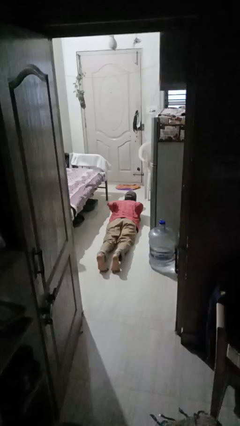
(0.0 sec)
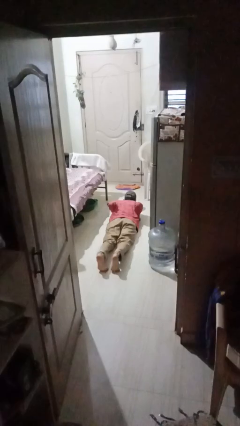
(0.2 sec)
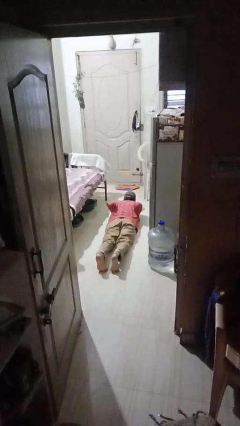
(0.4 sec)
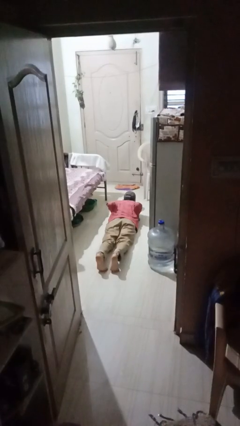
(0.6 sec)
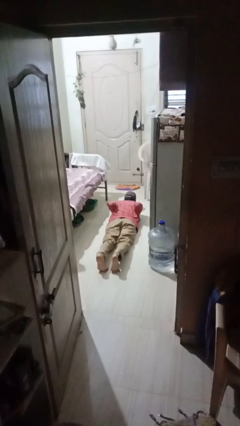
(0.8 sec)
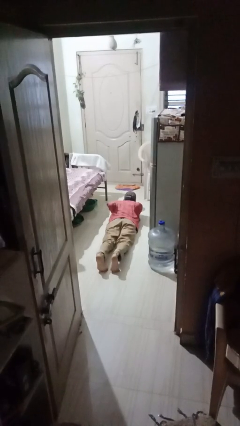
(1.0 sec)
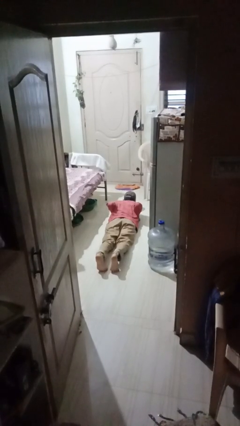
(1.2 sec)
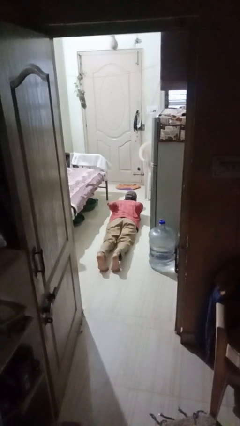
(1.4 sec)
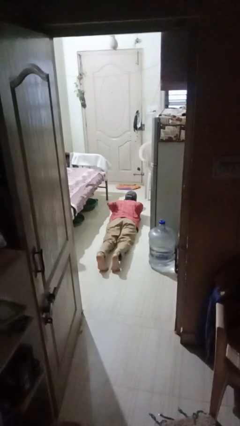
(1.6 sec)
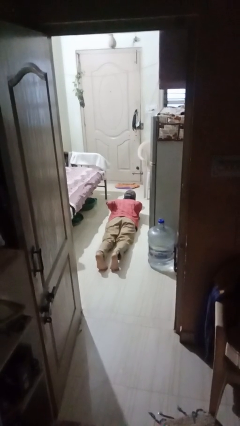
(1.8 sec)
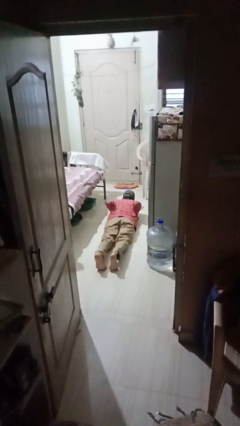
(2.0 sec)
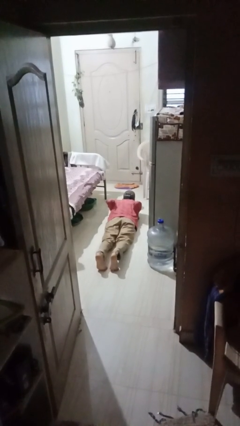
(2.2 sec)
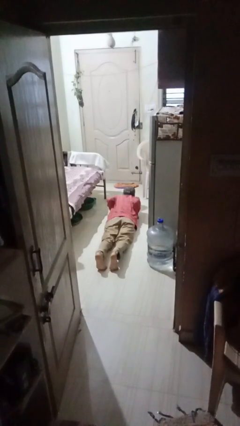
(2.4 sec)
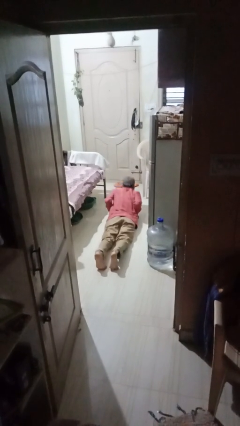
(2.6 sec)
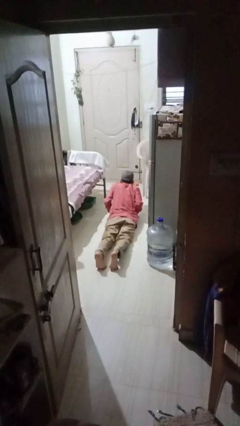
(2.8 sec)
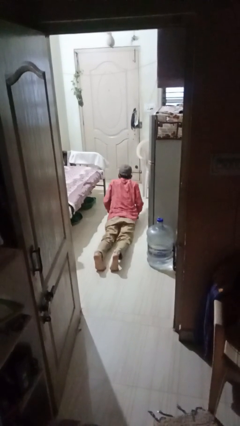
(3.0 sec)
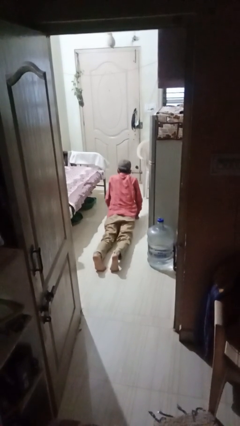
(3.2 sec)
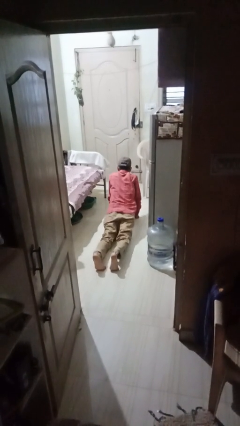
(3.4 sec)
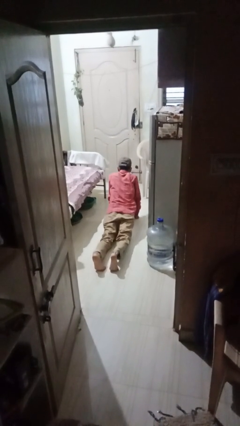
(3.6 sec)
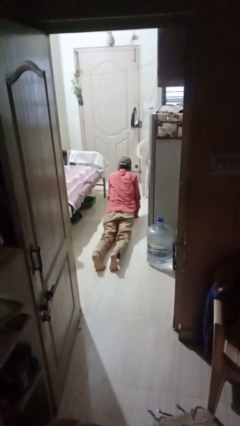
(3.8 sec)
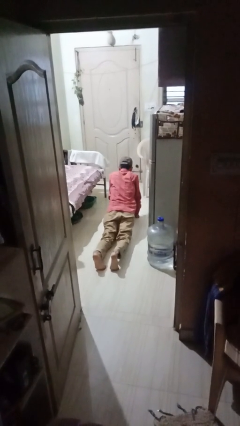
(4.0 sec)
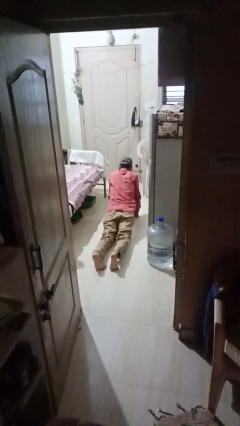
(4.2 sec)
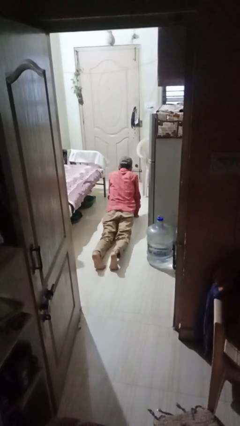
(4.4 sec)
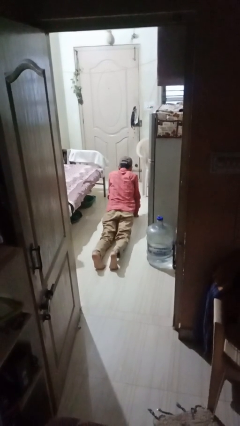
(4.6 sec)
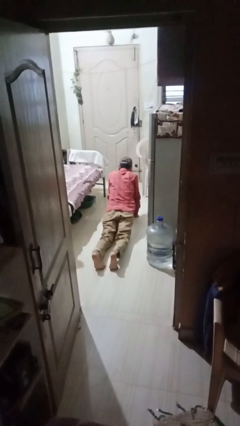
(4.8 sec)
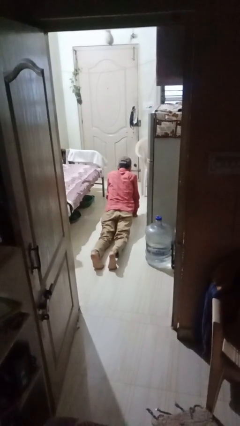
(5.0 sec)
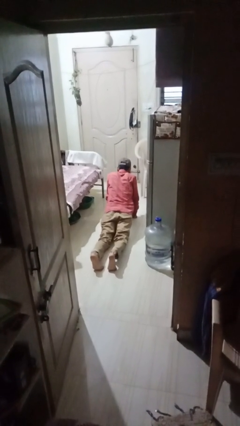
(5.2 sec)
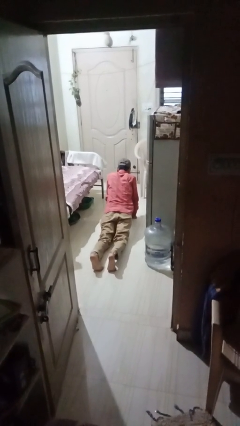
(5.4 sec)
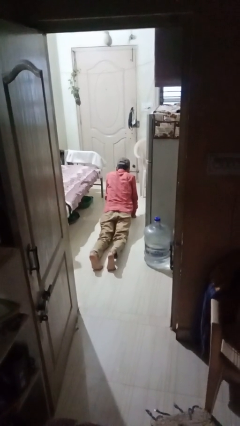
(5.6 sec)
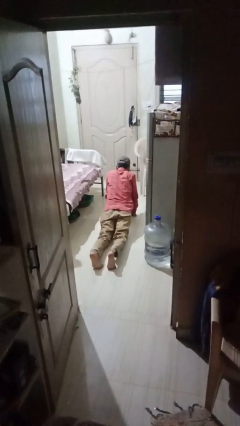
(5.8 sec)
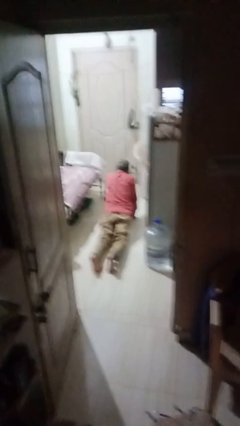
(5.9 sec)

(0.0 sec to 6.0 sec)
person exercises with pushup

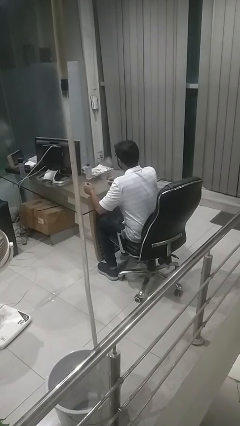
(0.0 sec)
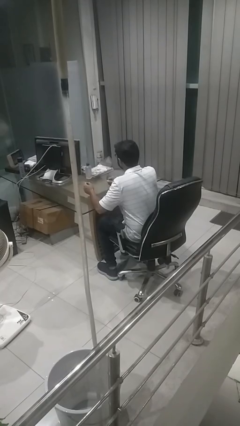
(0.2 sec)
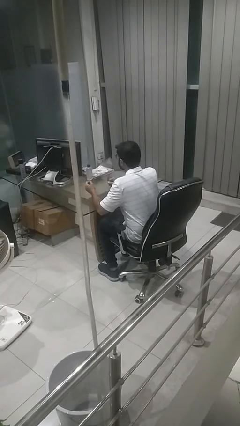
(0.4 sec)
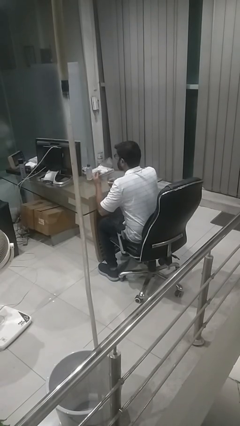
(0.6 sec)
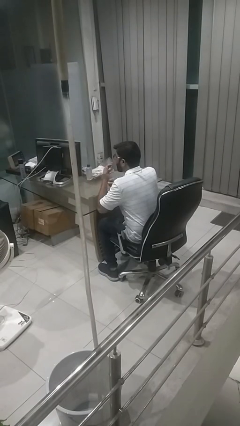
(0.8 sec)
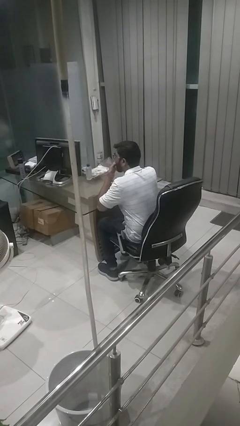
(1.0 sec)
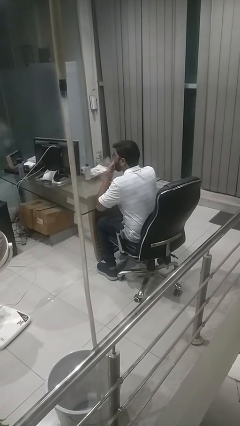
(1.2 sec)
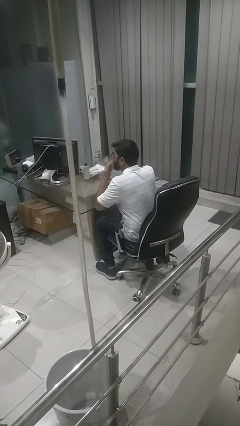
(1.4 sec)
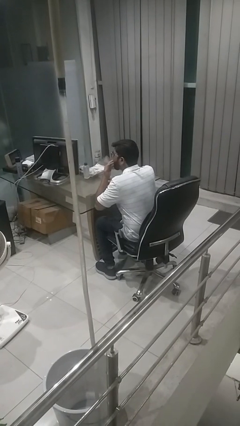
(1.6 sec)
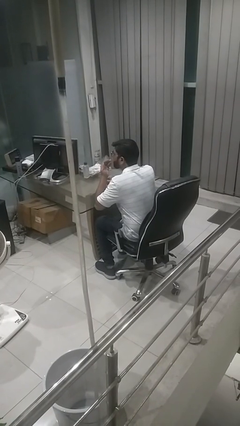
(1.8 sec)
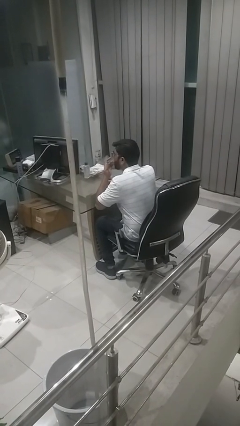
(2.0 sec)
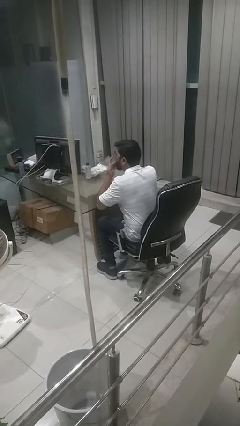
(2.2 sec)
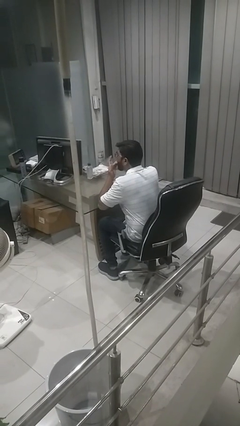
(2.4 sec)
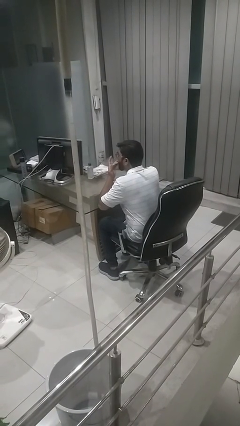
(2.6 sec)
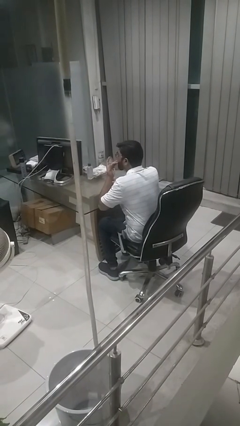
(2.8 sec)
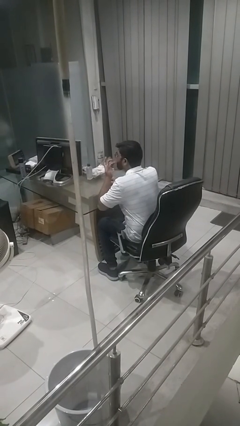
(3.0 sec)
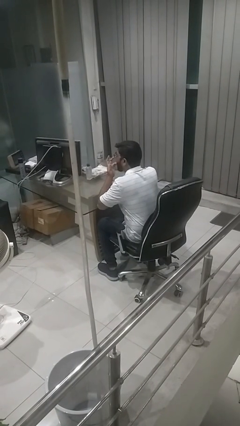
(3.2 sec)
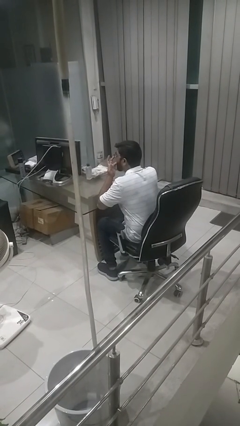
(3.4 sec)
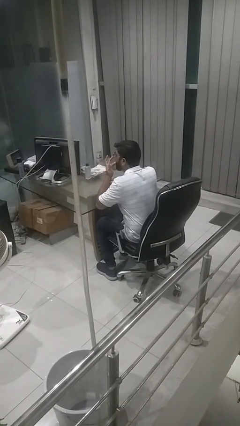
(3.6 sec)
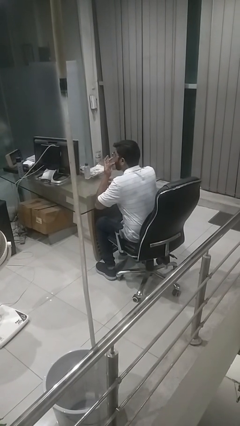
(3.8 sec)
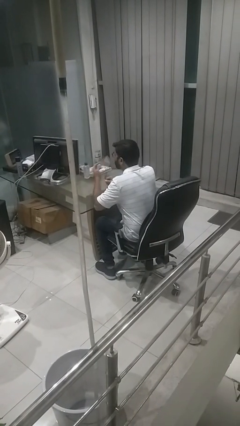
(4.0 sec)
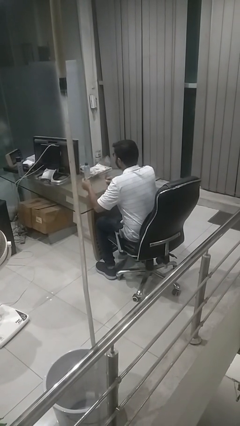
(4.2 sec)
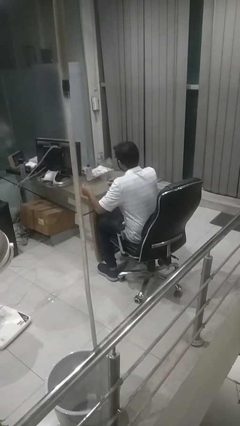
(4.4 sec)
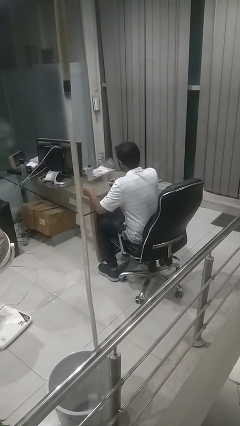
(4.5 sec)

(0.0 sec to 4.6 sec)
person licks fingers

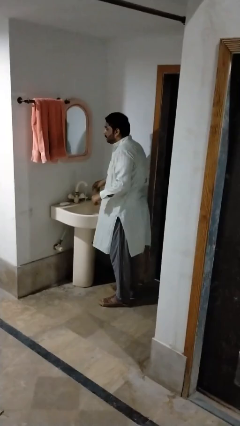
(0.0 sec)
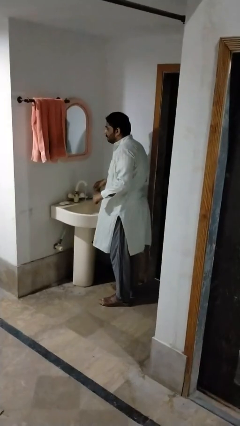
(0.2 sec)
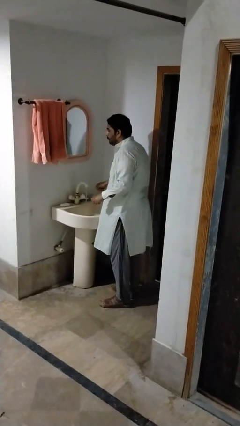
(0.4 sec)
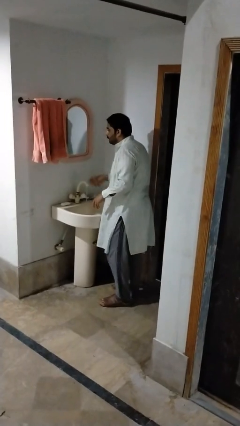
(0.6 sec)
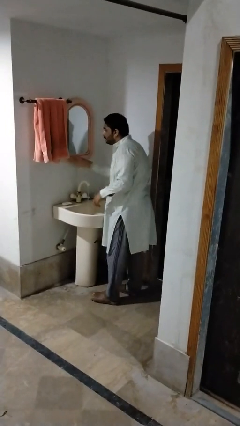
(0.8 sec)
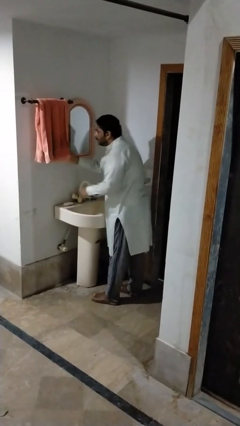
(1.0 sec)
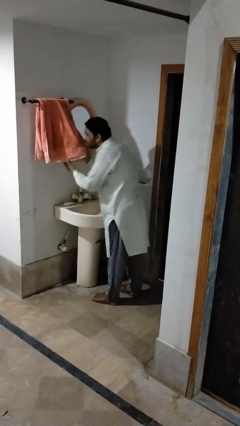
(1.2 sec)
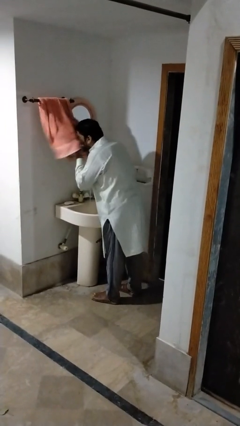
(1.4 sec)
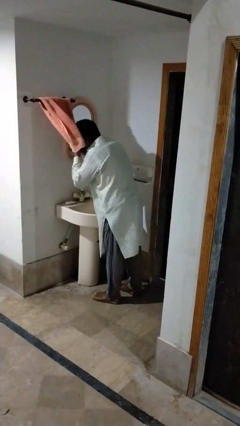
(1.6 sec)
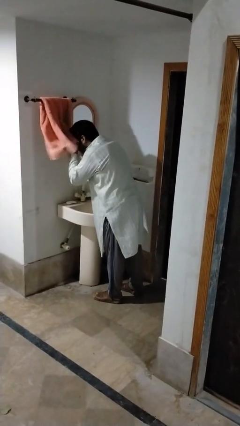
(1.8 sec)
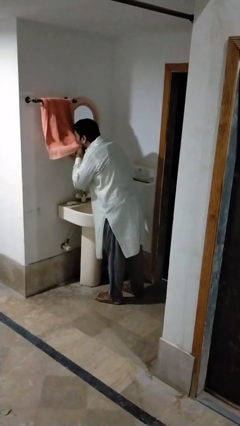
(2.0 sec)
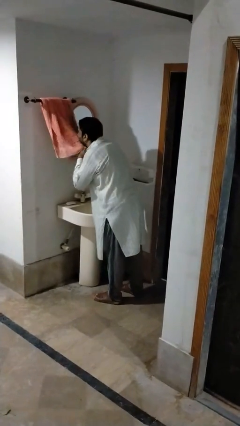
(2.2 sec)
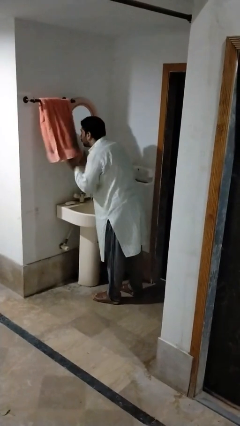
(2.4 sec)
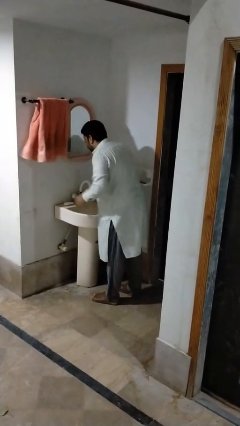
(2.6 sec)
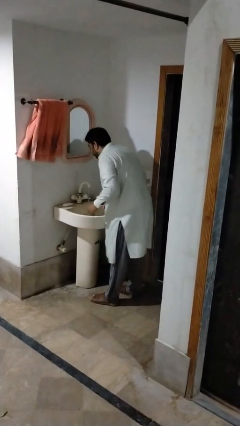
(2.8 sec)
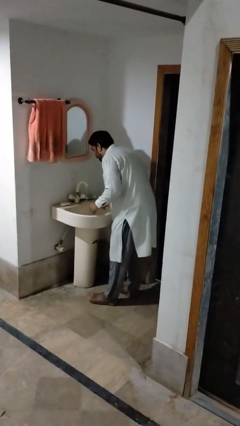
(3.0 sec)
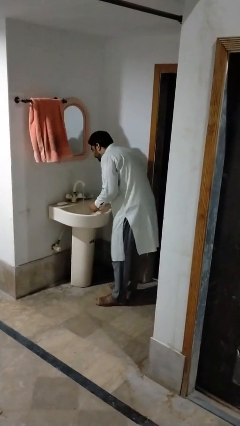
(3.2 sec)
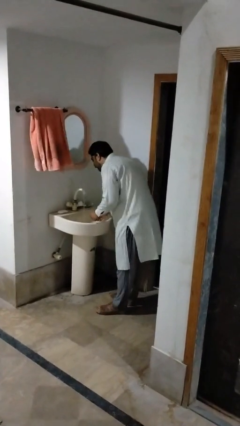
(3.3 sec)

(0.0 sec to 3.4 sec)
person dries face with towel

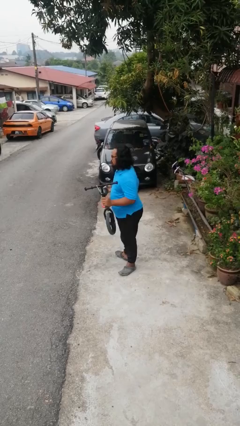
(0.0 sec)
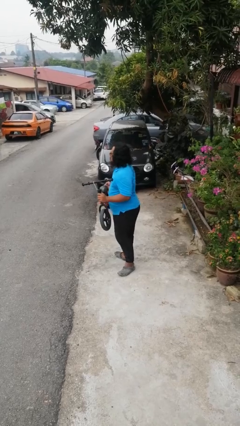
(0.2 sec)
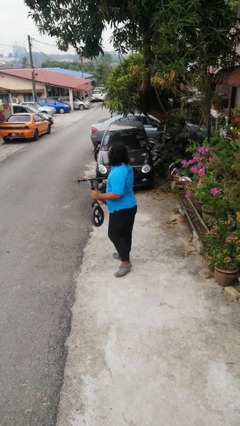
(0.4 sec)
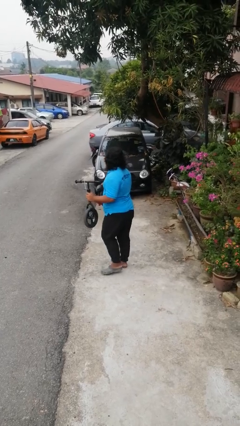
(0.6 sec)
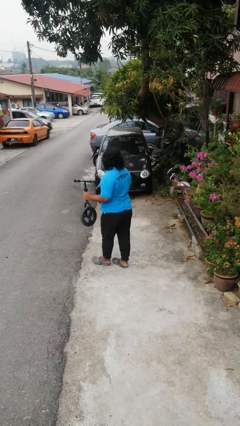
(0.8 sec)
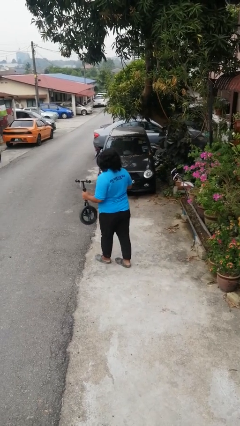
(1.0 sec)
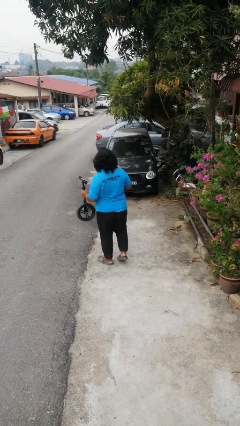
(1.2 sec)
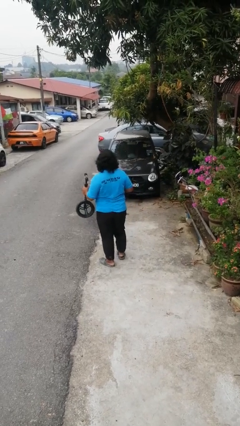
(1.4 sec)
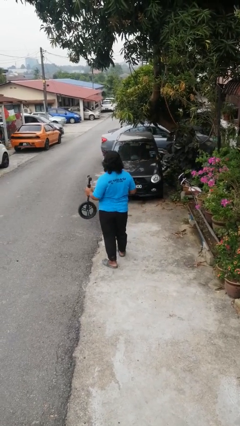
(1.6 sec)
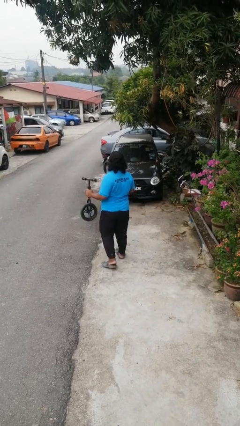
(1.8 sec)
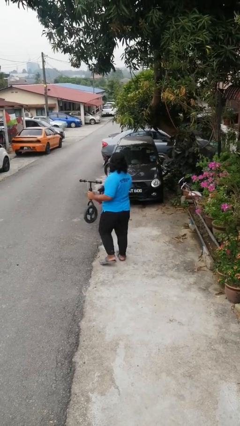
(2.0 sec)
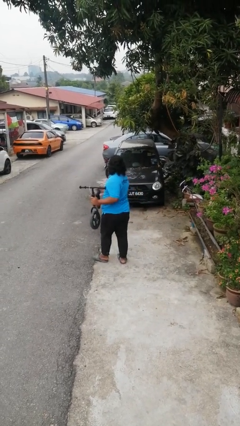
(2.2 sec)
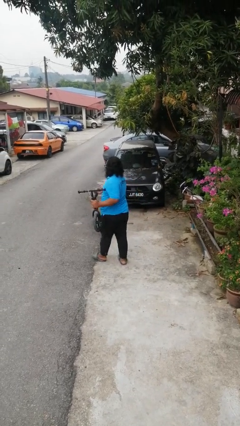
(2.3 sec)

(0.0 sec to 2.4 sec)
person carries bicycle

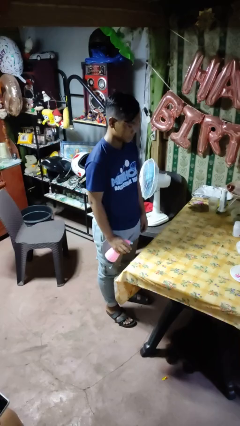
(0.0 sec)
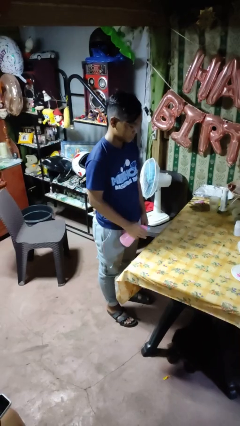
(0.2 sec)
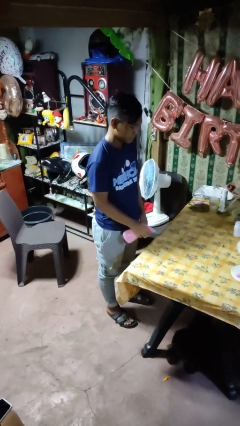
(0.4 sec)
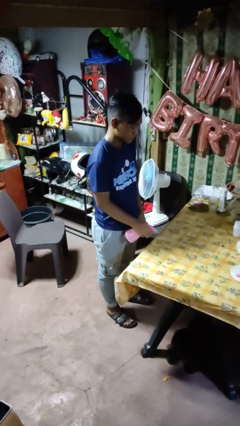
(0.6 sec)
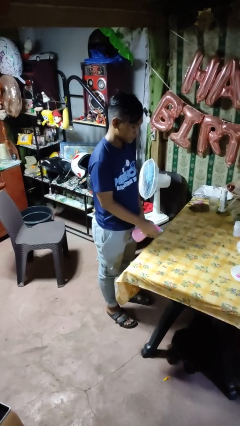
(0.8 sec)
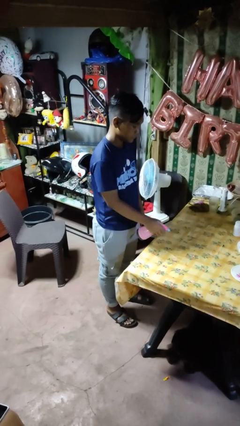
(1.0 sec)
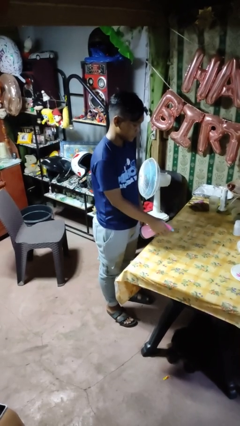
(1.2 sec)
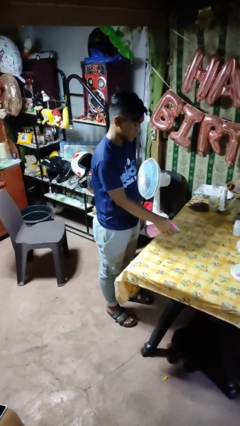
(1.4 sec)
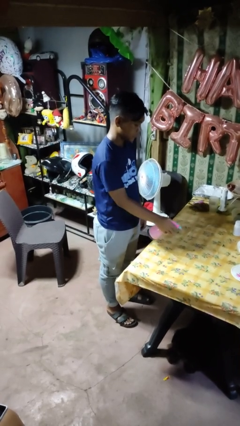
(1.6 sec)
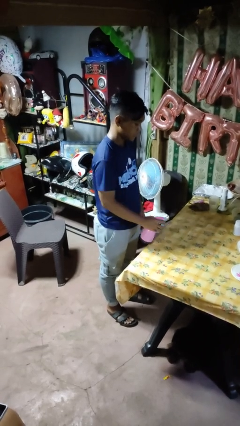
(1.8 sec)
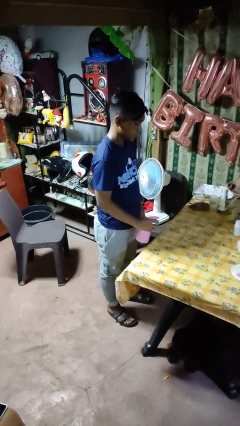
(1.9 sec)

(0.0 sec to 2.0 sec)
person sprays from bottle
